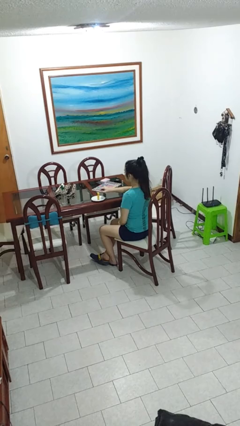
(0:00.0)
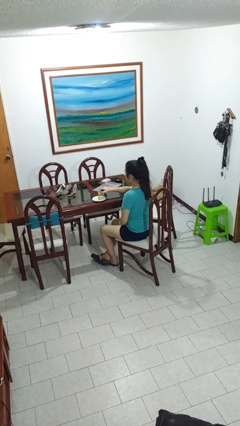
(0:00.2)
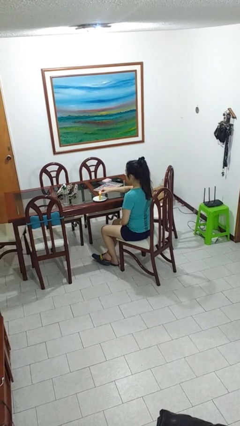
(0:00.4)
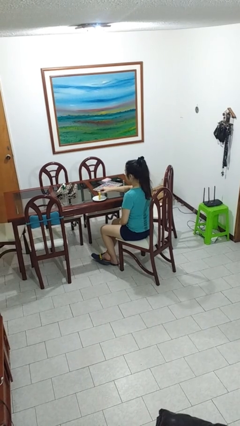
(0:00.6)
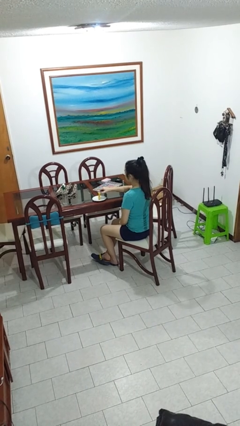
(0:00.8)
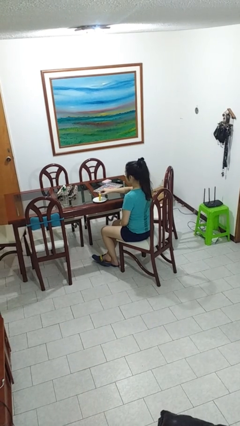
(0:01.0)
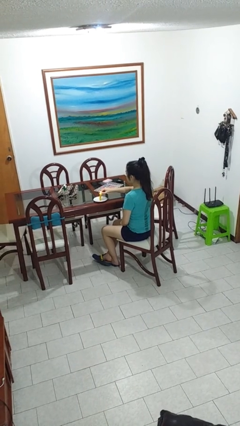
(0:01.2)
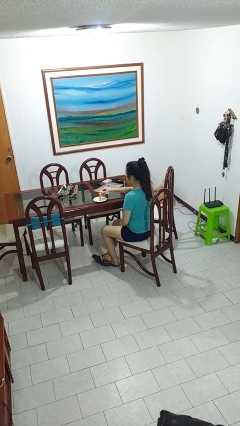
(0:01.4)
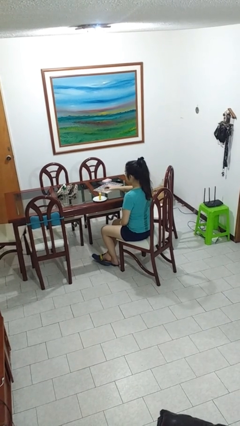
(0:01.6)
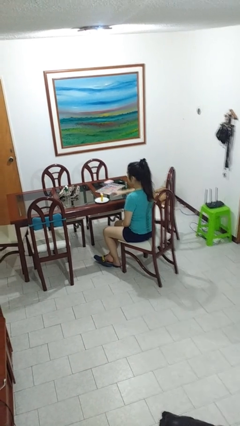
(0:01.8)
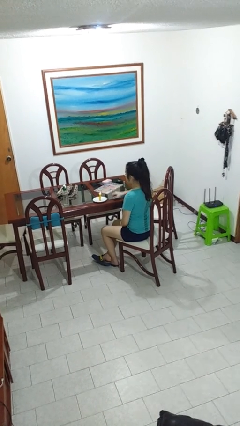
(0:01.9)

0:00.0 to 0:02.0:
person lights candle

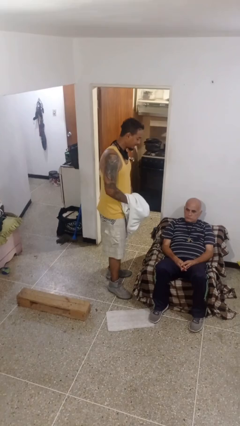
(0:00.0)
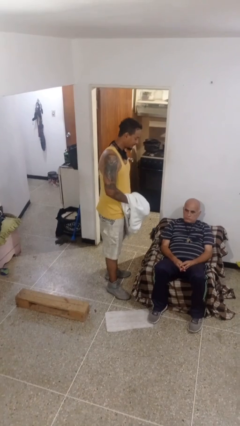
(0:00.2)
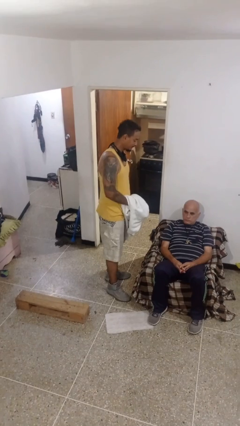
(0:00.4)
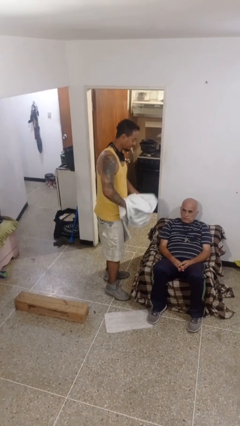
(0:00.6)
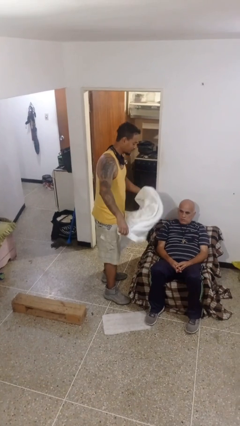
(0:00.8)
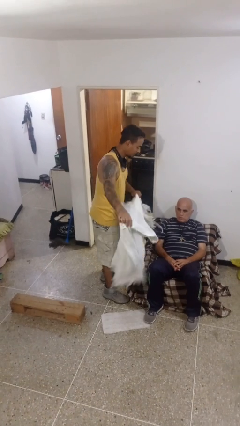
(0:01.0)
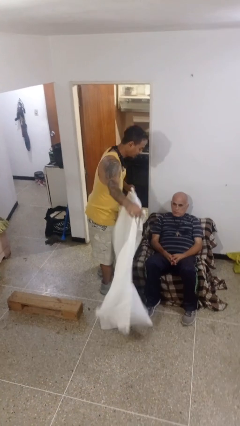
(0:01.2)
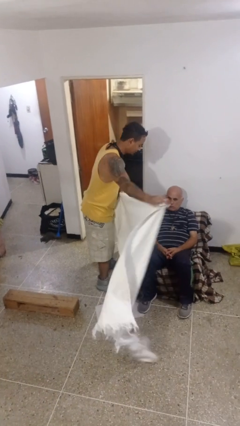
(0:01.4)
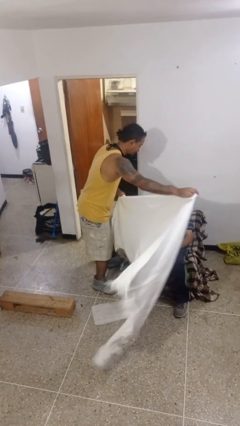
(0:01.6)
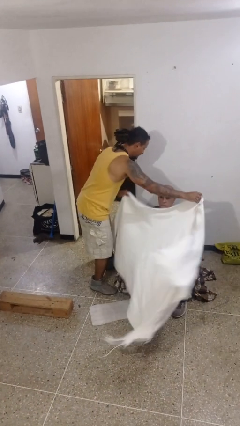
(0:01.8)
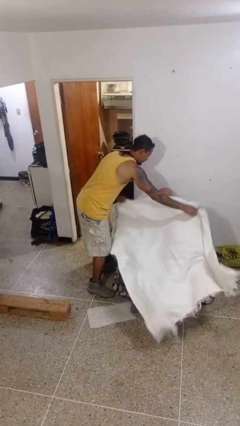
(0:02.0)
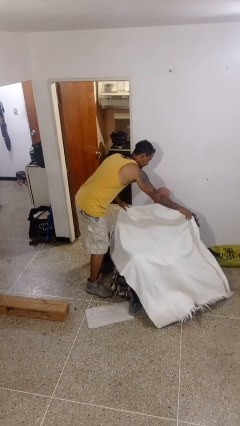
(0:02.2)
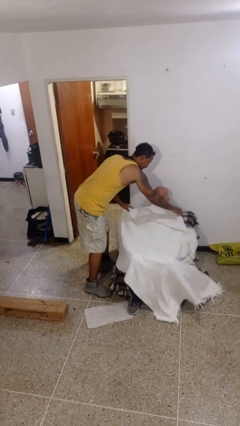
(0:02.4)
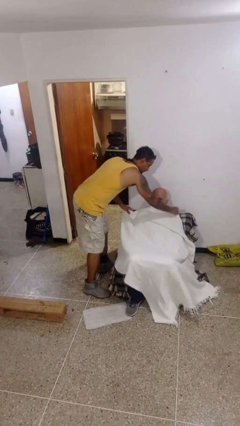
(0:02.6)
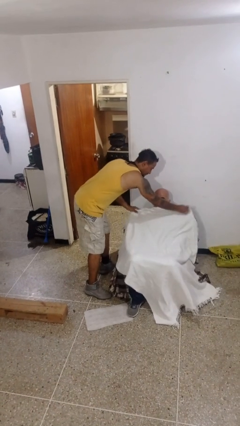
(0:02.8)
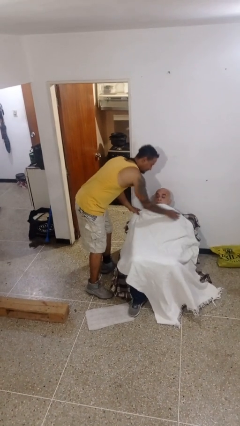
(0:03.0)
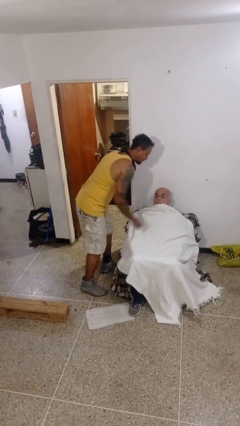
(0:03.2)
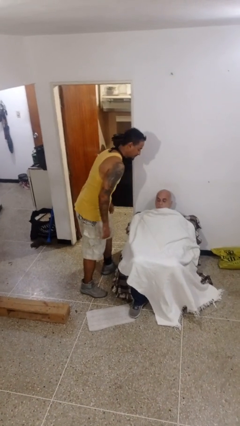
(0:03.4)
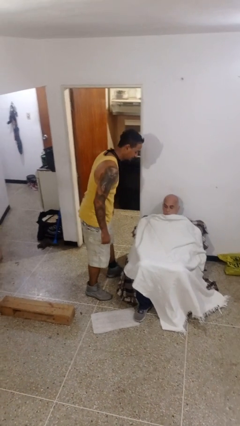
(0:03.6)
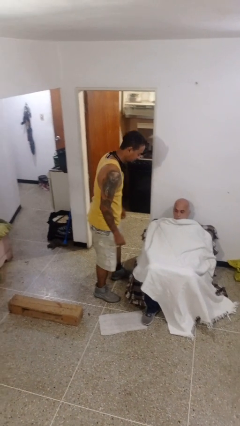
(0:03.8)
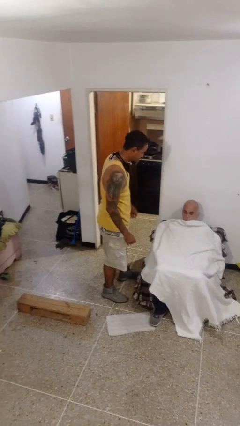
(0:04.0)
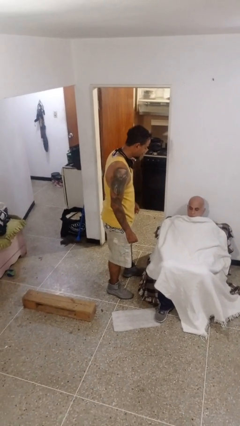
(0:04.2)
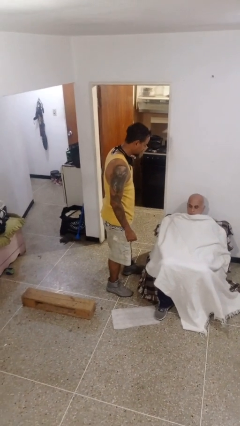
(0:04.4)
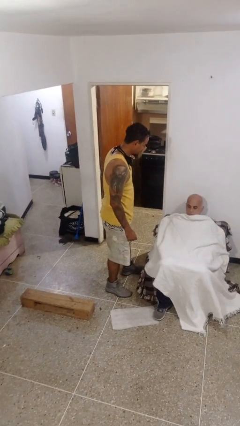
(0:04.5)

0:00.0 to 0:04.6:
person covers friend with blanket

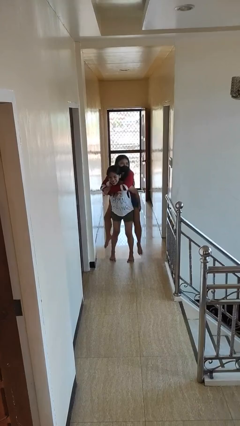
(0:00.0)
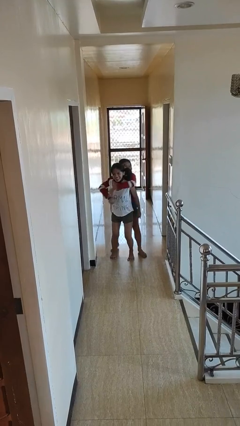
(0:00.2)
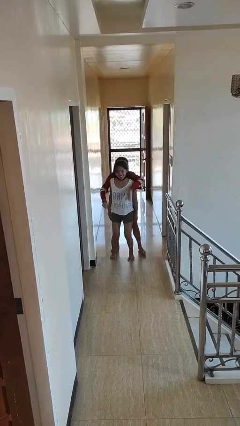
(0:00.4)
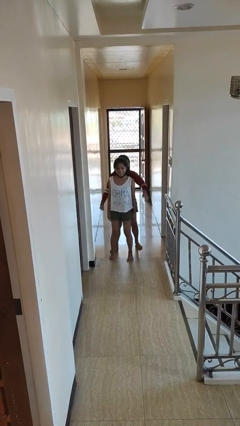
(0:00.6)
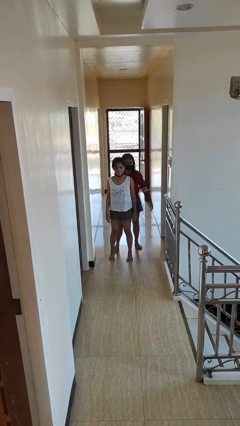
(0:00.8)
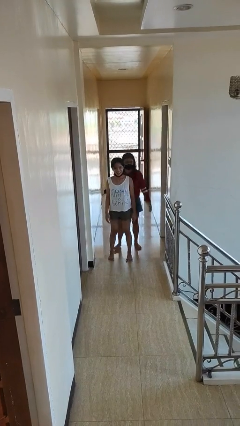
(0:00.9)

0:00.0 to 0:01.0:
person puts down person

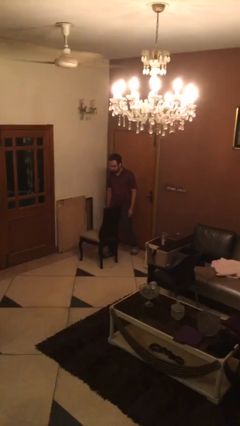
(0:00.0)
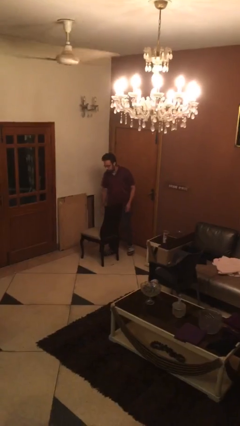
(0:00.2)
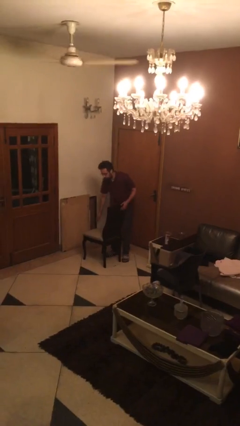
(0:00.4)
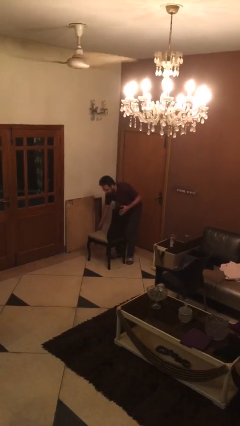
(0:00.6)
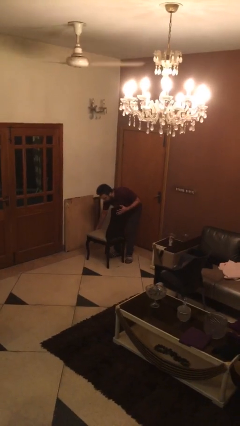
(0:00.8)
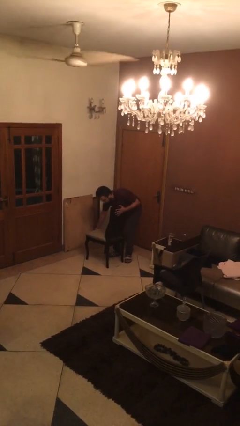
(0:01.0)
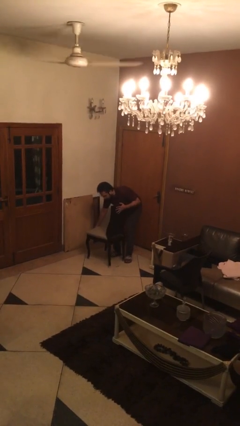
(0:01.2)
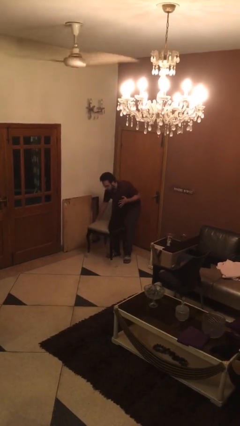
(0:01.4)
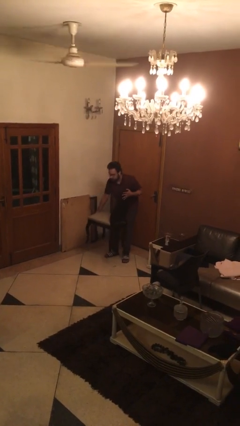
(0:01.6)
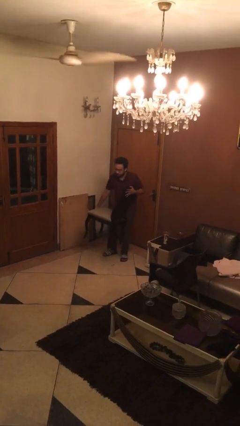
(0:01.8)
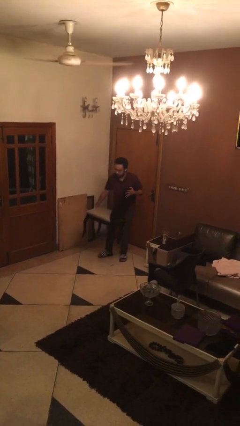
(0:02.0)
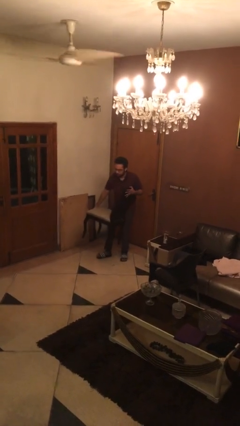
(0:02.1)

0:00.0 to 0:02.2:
person picks up object from floor

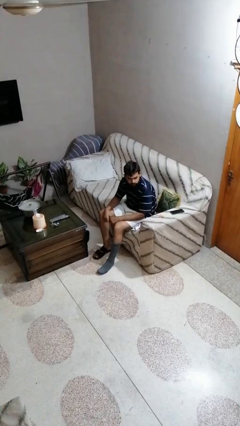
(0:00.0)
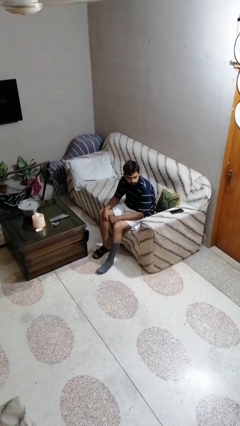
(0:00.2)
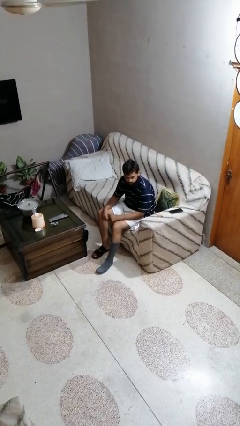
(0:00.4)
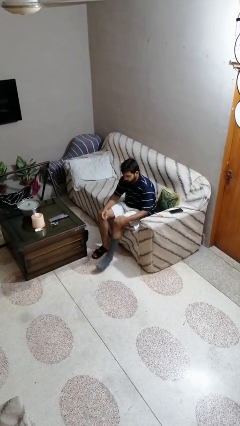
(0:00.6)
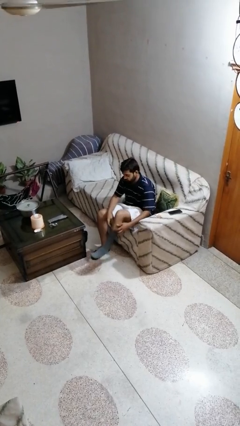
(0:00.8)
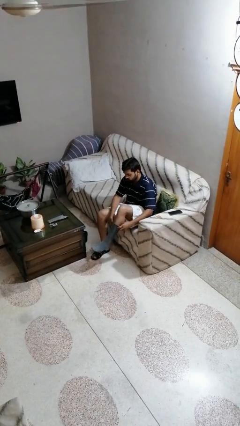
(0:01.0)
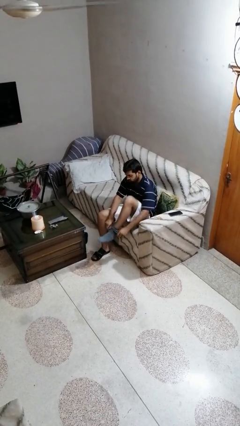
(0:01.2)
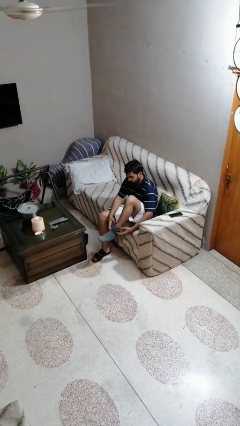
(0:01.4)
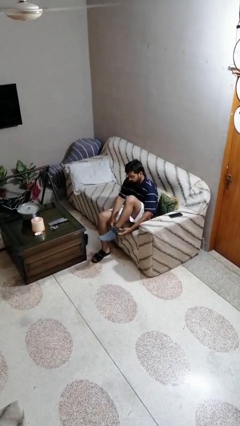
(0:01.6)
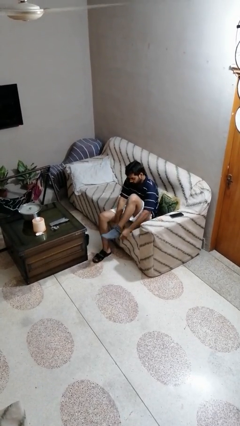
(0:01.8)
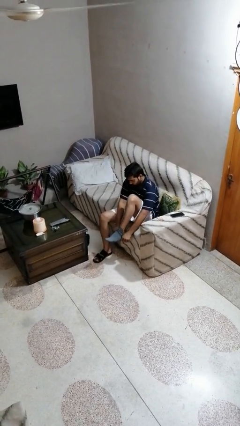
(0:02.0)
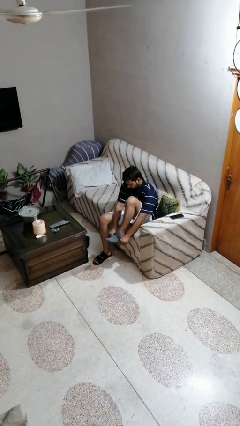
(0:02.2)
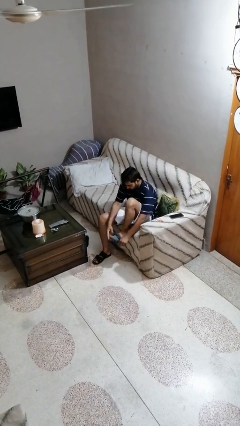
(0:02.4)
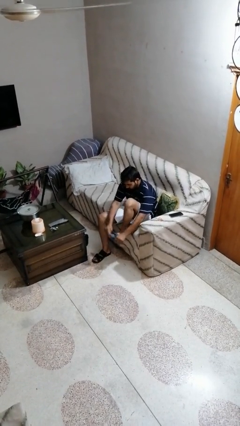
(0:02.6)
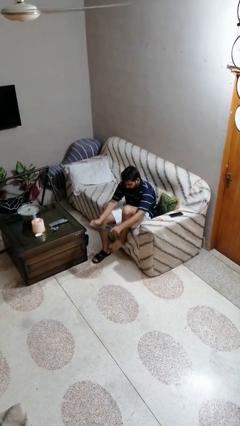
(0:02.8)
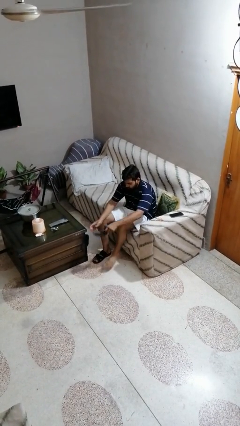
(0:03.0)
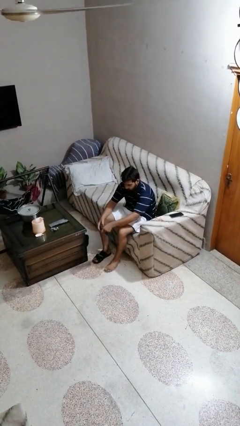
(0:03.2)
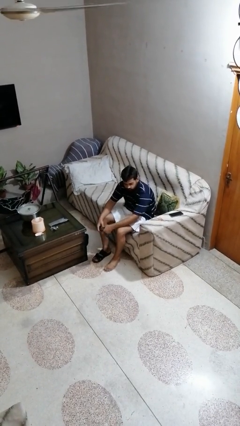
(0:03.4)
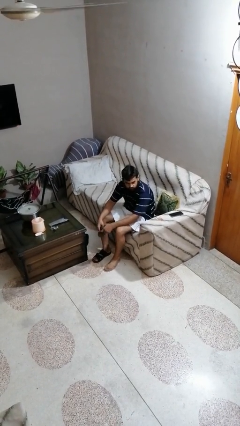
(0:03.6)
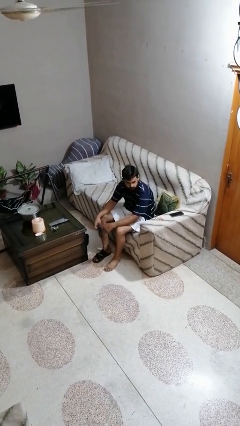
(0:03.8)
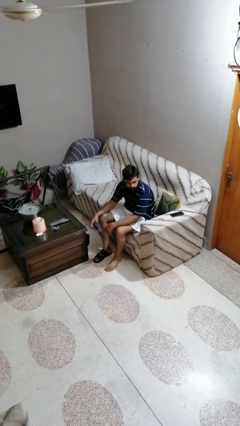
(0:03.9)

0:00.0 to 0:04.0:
person takes off socks

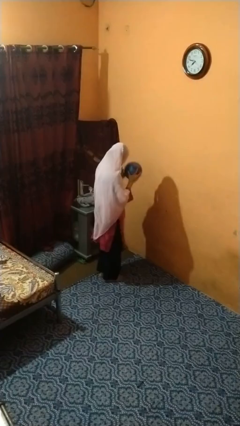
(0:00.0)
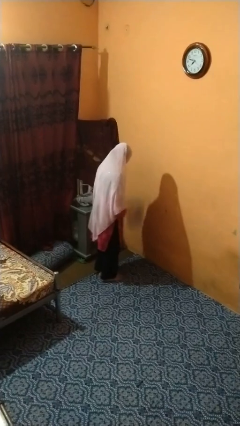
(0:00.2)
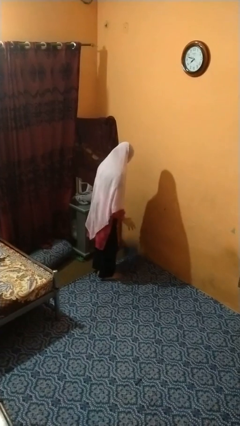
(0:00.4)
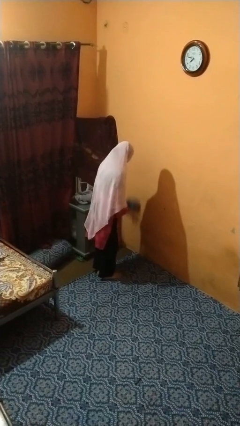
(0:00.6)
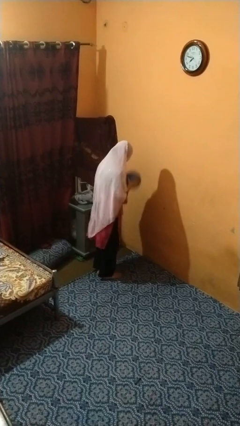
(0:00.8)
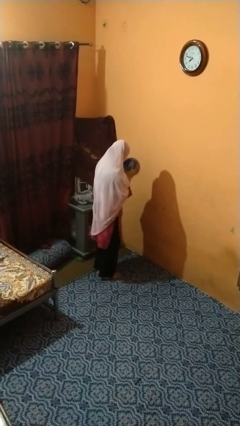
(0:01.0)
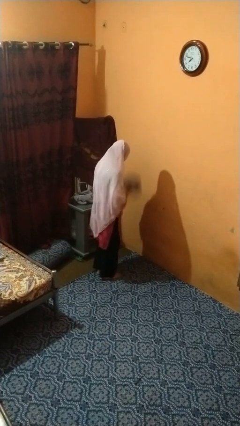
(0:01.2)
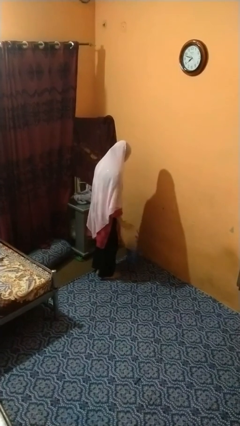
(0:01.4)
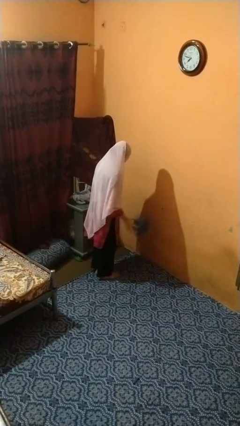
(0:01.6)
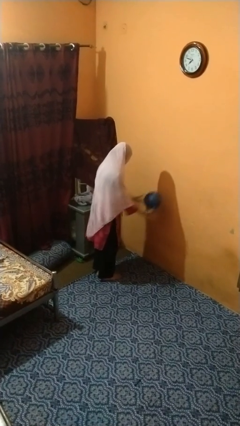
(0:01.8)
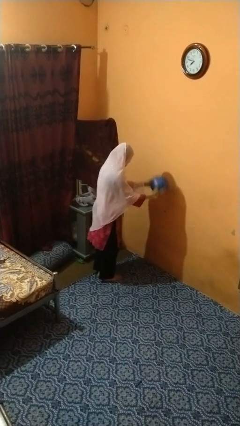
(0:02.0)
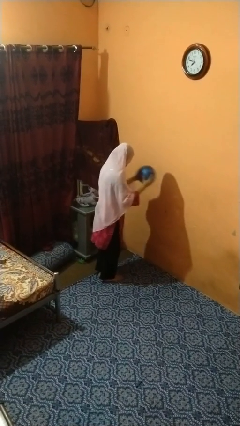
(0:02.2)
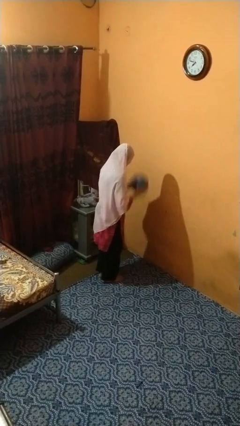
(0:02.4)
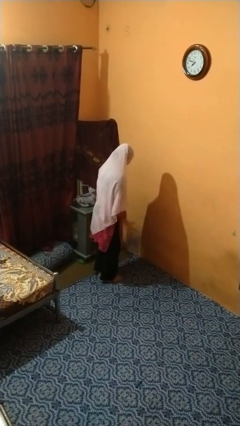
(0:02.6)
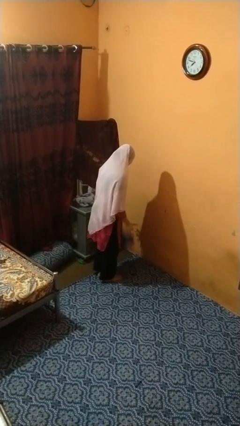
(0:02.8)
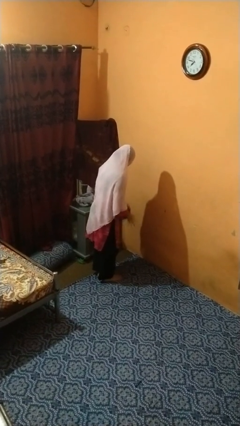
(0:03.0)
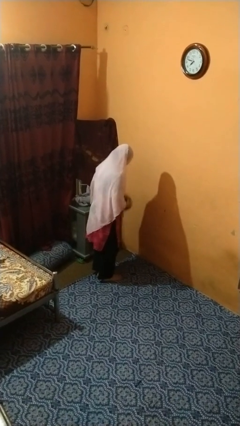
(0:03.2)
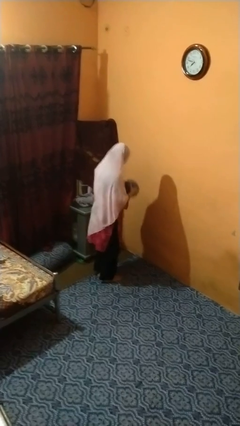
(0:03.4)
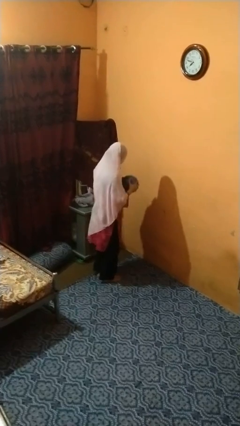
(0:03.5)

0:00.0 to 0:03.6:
person bounces ball on floor

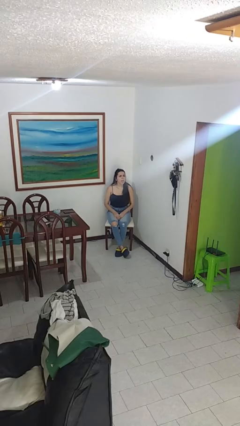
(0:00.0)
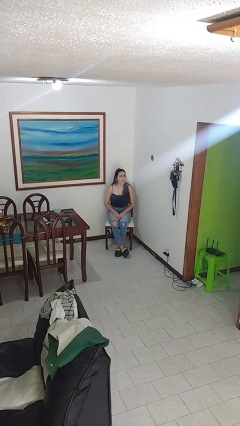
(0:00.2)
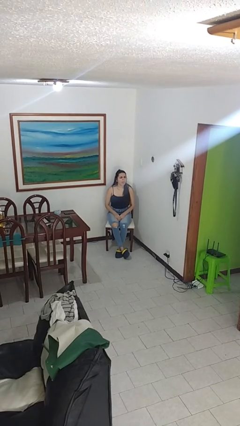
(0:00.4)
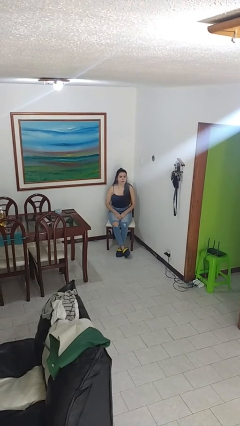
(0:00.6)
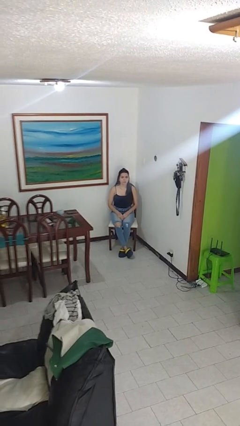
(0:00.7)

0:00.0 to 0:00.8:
person sticks out tongue
